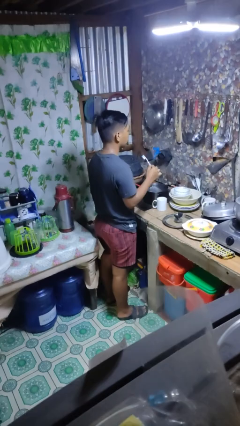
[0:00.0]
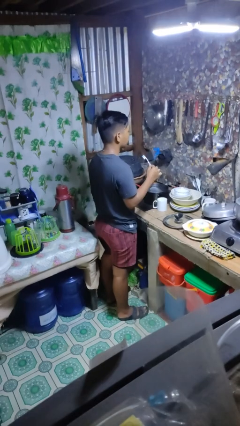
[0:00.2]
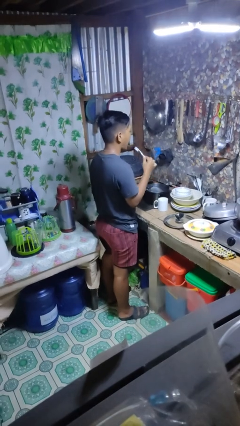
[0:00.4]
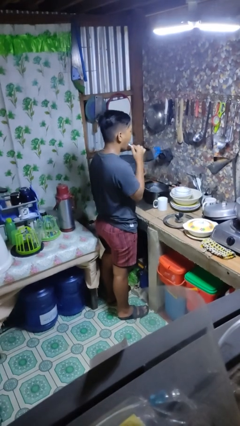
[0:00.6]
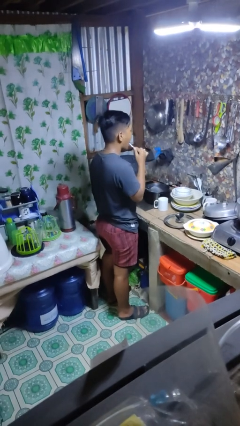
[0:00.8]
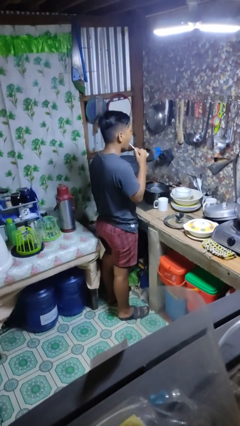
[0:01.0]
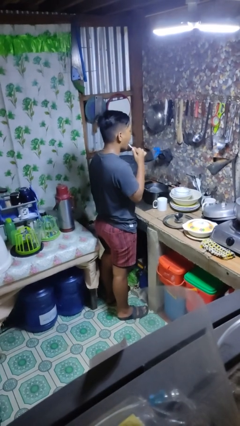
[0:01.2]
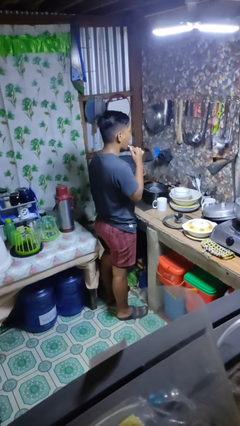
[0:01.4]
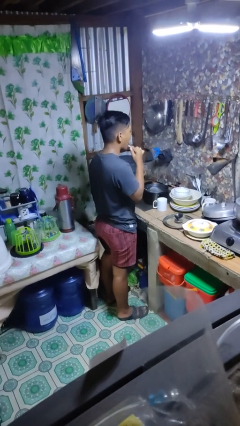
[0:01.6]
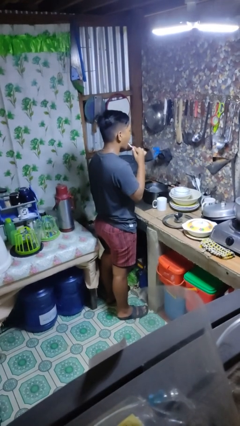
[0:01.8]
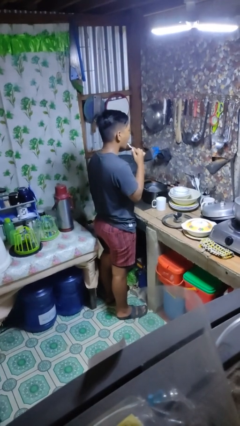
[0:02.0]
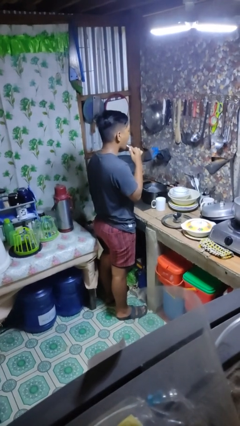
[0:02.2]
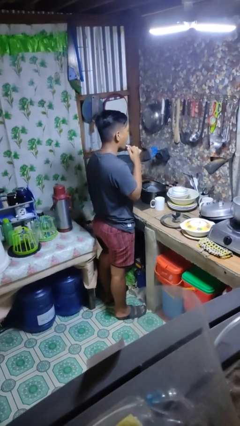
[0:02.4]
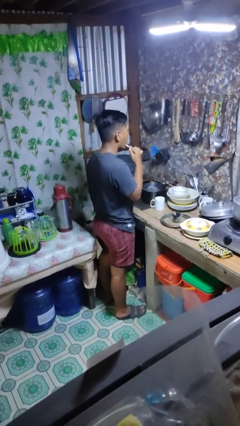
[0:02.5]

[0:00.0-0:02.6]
person brushes teeth

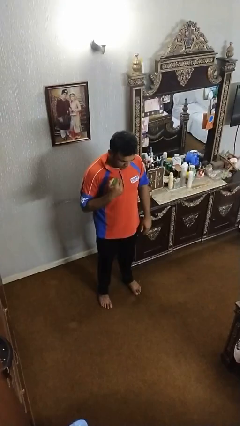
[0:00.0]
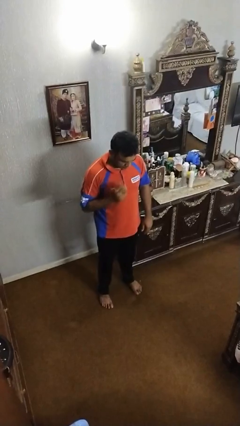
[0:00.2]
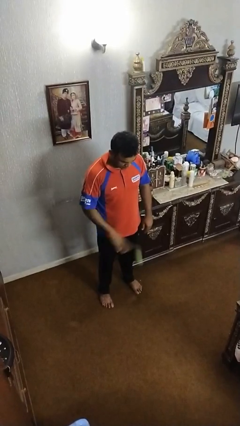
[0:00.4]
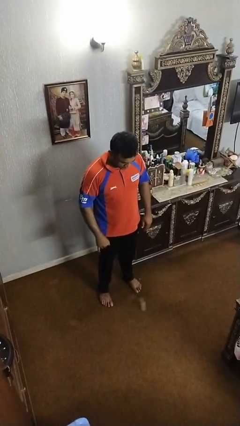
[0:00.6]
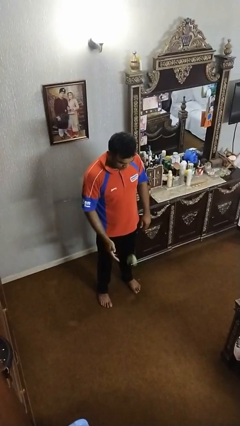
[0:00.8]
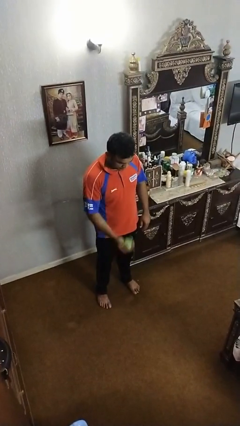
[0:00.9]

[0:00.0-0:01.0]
person bounces ball on floor

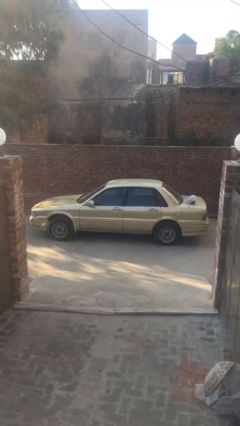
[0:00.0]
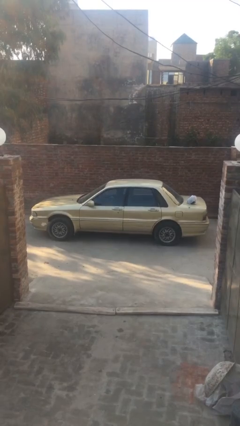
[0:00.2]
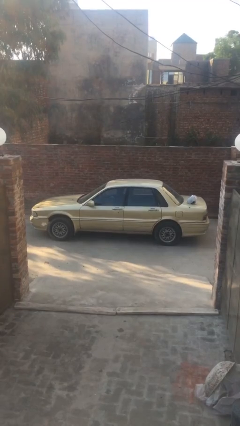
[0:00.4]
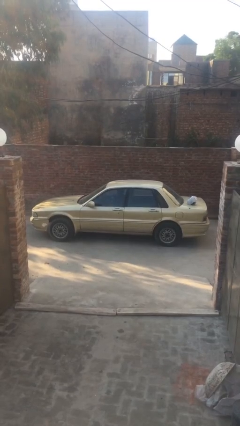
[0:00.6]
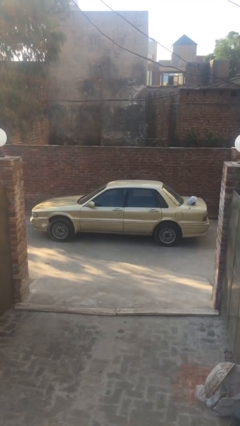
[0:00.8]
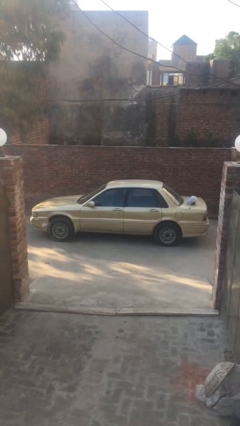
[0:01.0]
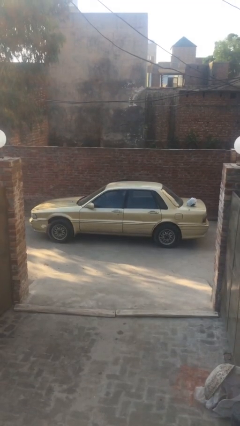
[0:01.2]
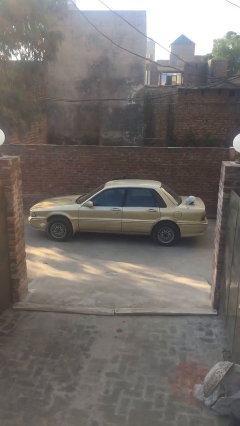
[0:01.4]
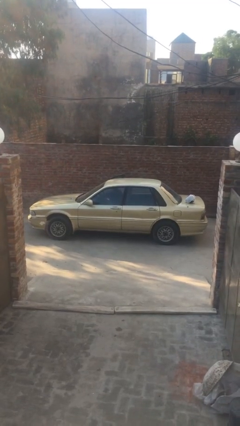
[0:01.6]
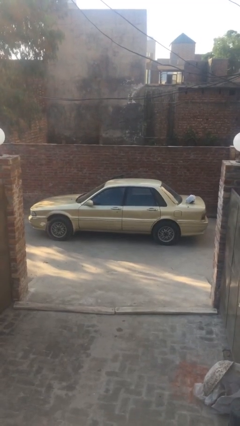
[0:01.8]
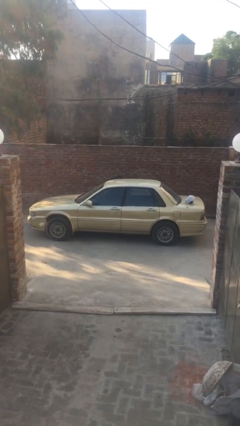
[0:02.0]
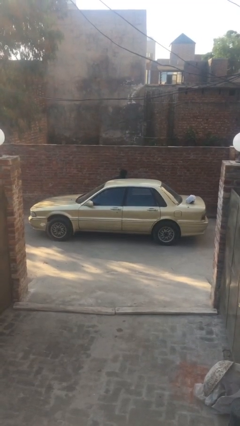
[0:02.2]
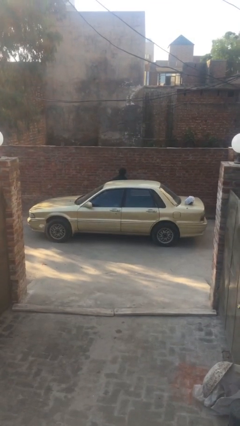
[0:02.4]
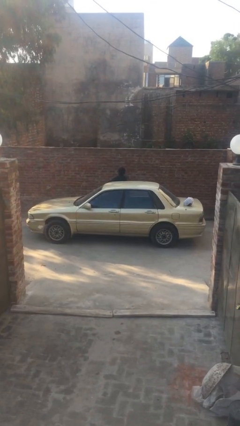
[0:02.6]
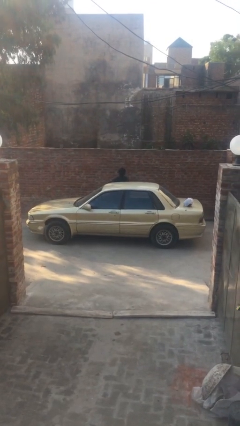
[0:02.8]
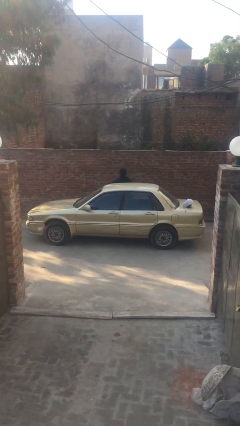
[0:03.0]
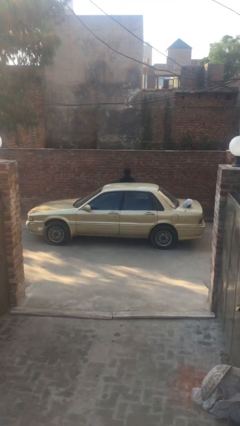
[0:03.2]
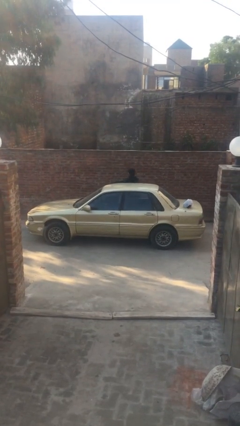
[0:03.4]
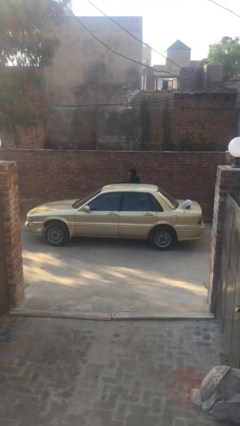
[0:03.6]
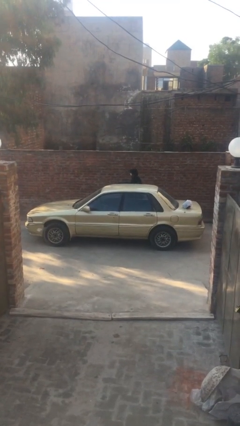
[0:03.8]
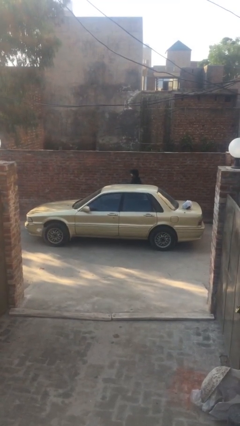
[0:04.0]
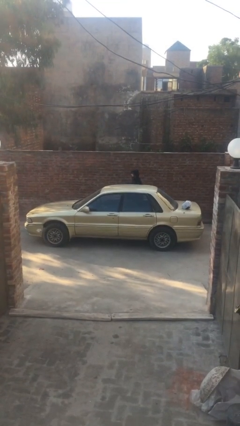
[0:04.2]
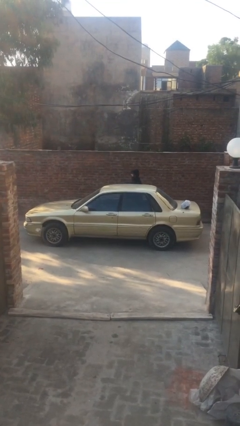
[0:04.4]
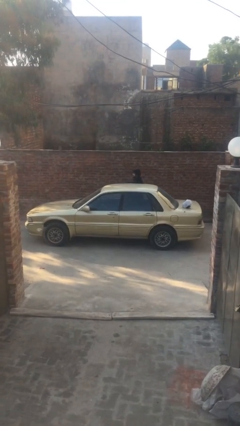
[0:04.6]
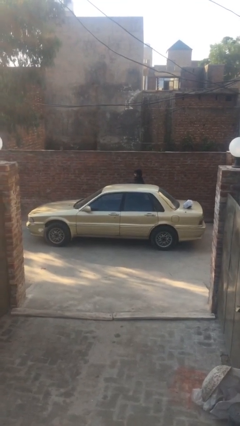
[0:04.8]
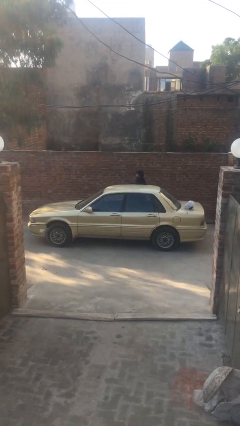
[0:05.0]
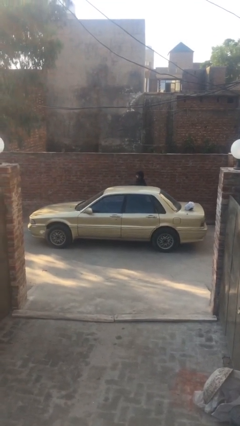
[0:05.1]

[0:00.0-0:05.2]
car drops off person

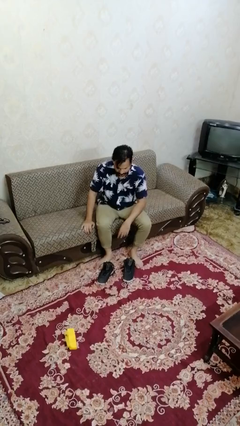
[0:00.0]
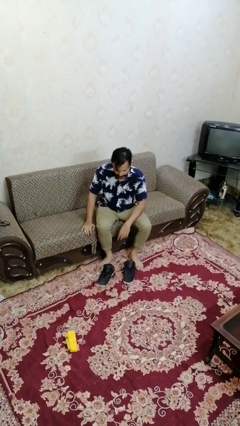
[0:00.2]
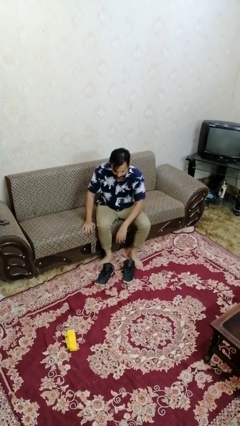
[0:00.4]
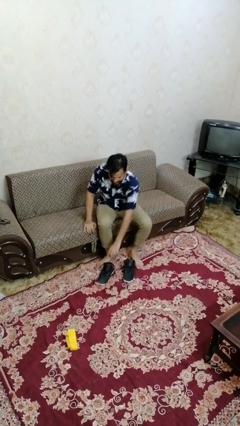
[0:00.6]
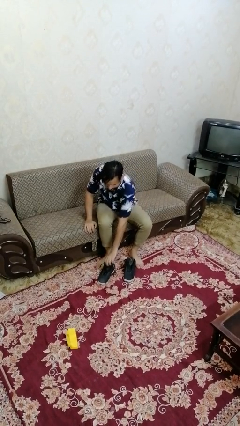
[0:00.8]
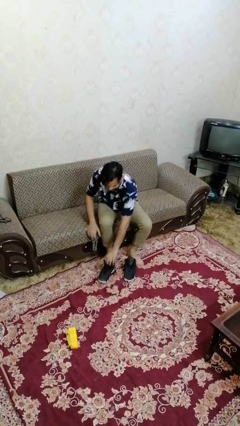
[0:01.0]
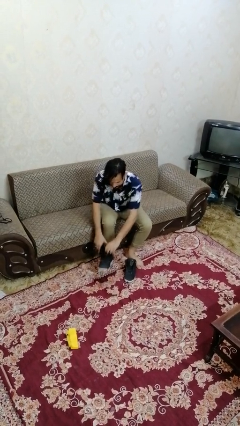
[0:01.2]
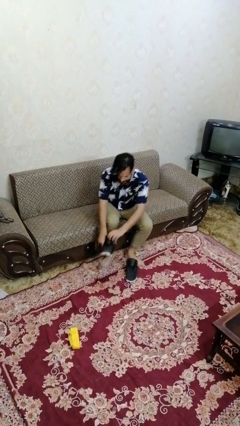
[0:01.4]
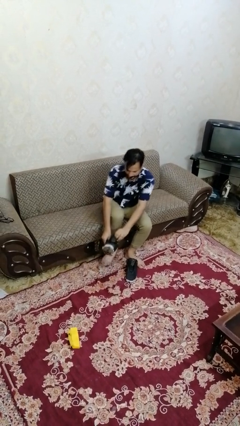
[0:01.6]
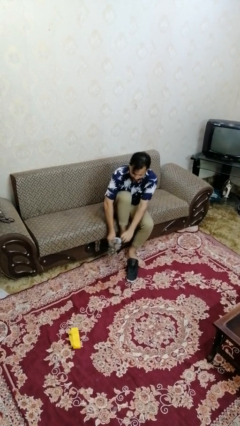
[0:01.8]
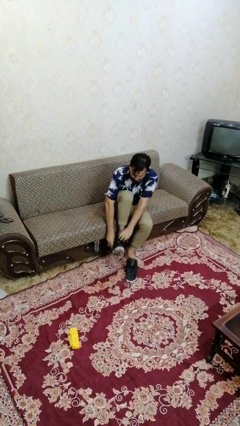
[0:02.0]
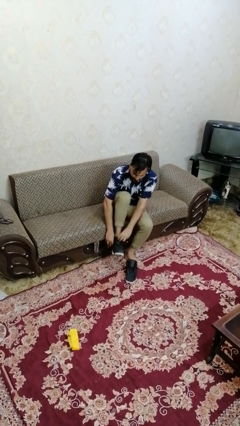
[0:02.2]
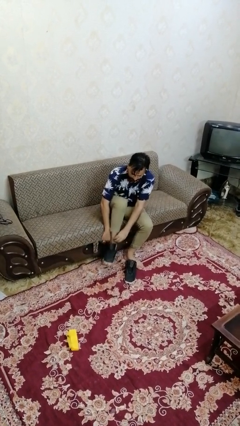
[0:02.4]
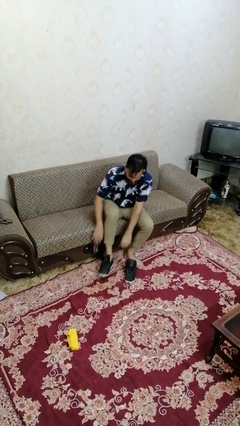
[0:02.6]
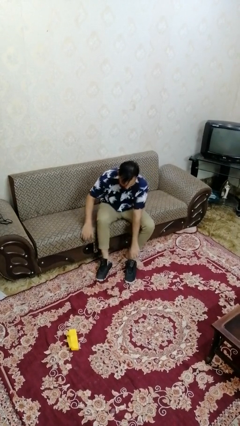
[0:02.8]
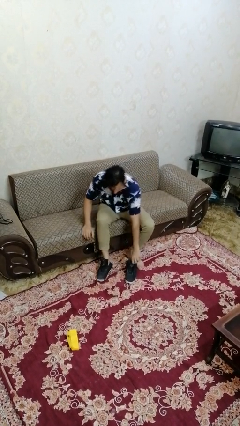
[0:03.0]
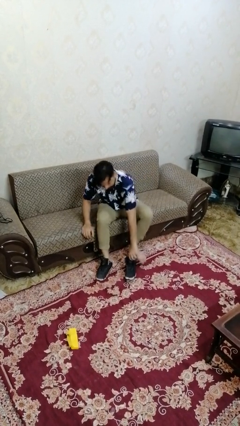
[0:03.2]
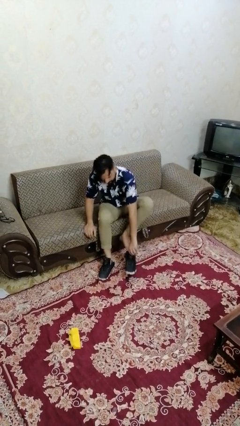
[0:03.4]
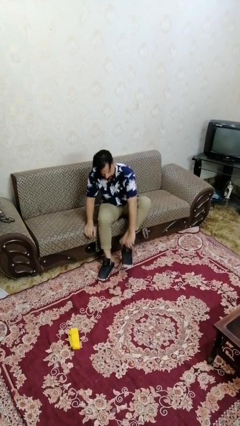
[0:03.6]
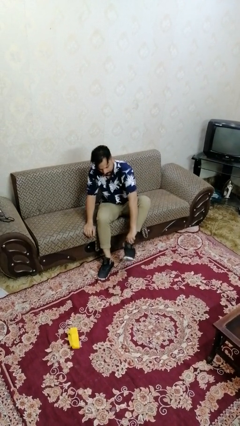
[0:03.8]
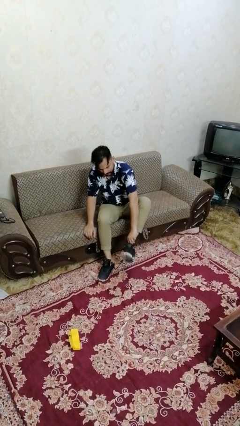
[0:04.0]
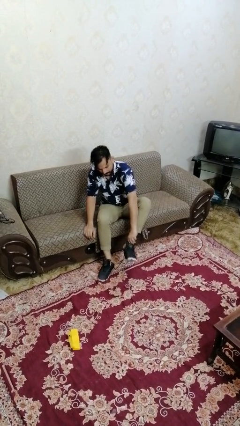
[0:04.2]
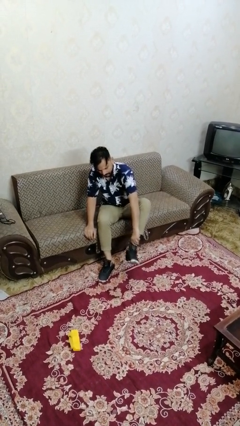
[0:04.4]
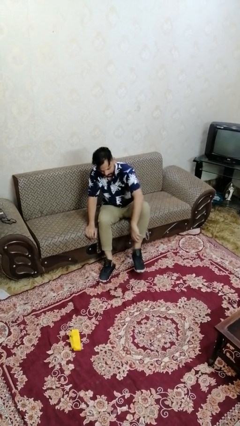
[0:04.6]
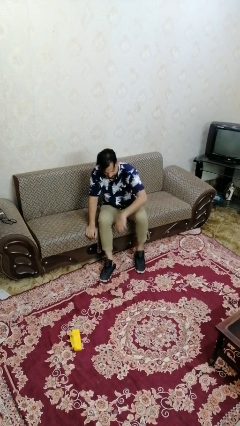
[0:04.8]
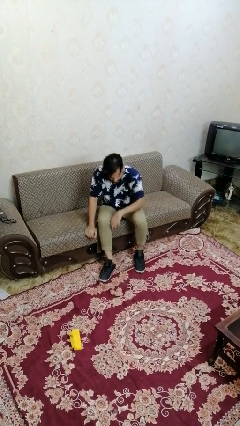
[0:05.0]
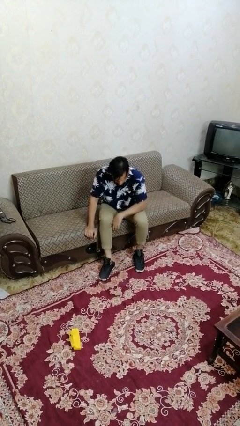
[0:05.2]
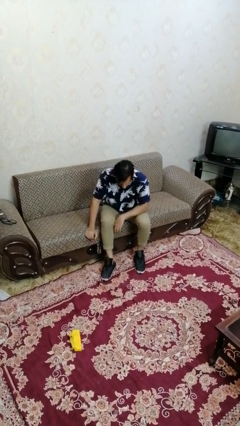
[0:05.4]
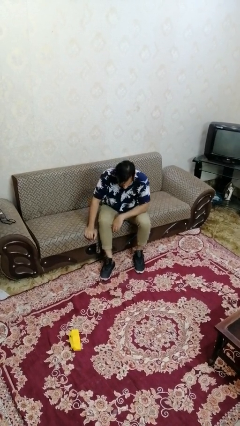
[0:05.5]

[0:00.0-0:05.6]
person puts on shoes

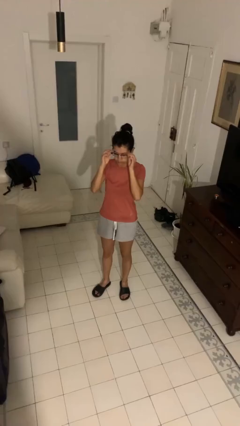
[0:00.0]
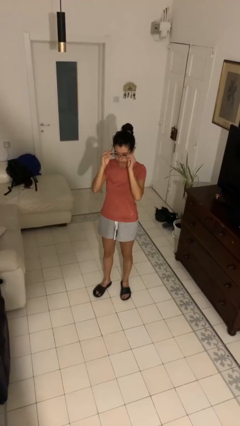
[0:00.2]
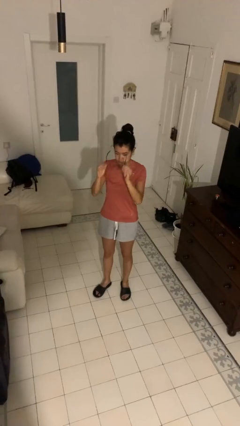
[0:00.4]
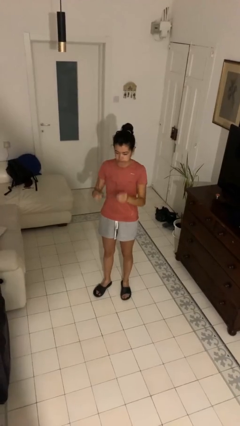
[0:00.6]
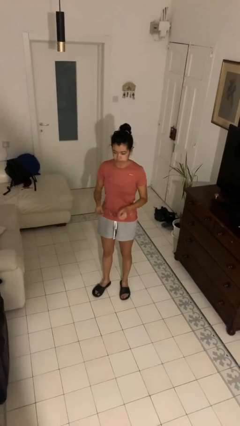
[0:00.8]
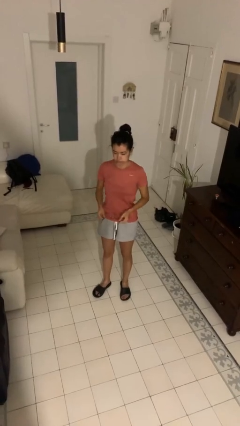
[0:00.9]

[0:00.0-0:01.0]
person takes off glasses

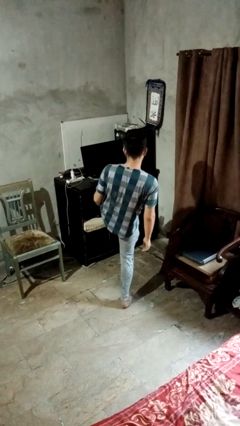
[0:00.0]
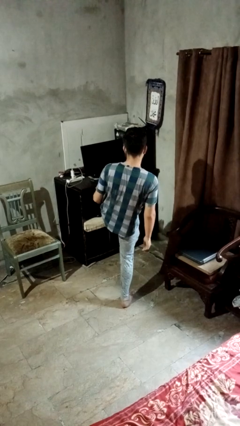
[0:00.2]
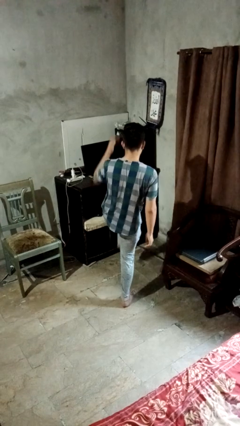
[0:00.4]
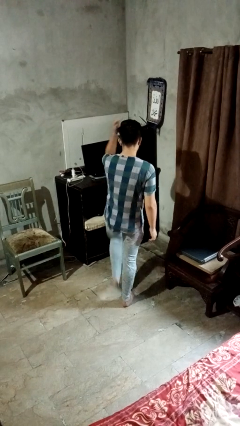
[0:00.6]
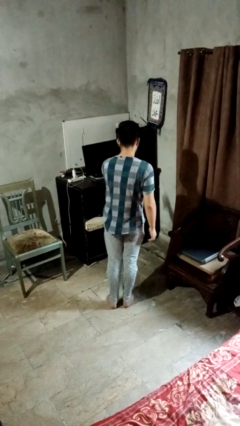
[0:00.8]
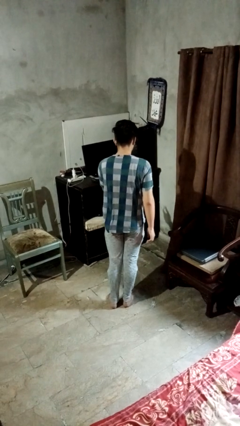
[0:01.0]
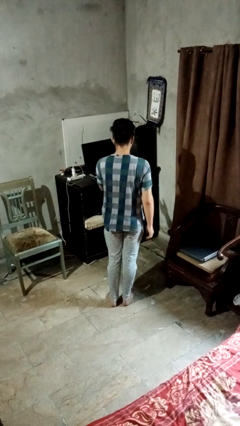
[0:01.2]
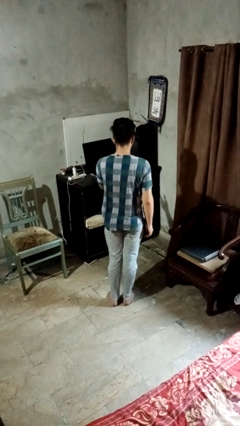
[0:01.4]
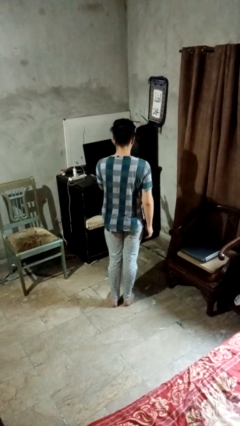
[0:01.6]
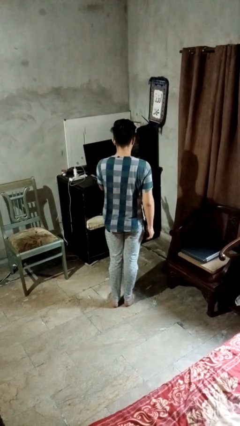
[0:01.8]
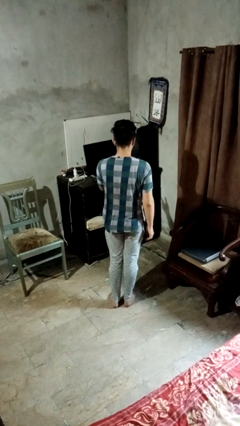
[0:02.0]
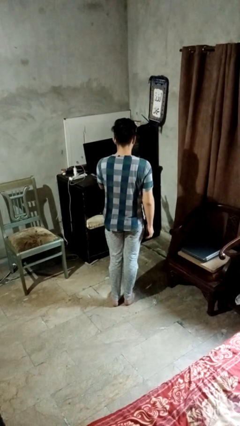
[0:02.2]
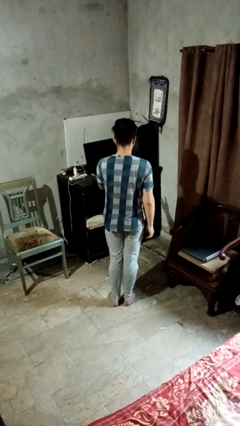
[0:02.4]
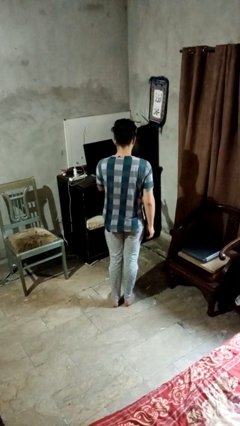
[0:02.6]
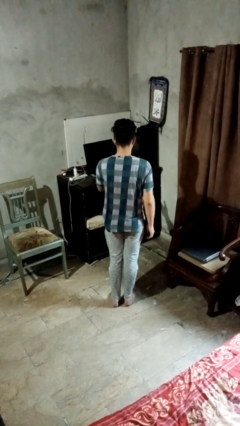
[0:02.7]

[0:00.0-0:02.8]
person karate chop
